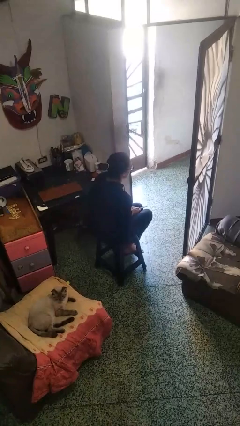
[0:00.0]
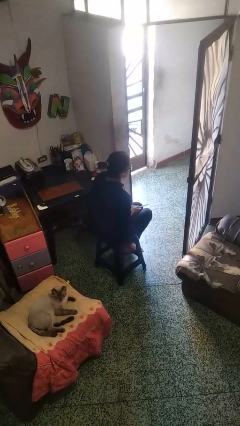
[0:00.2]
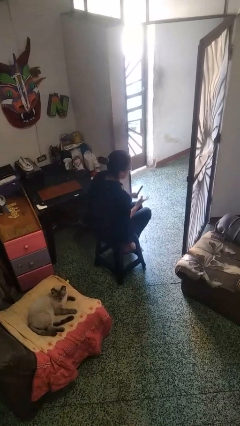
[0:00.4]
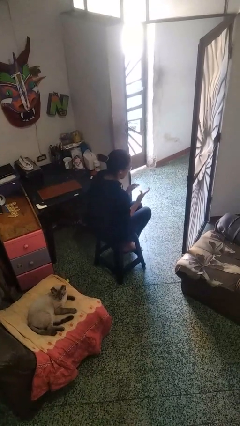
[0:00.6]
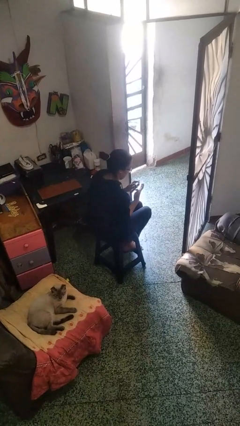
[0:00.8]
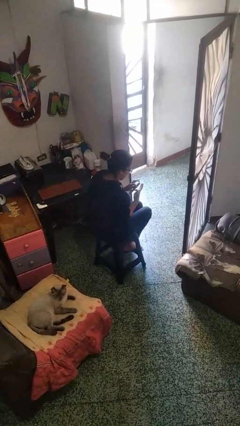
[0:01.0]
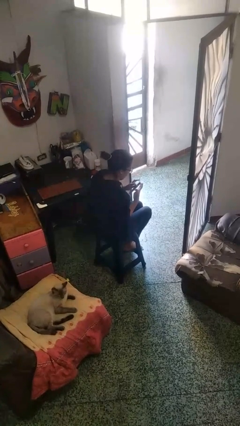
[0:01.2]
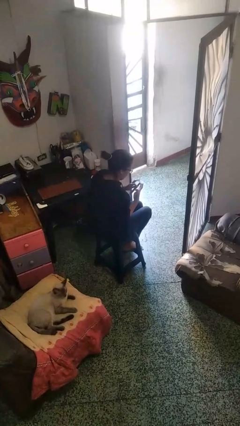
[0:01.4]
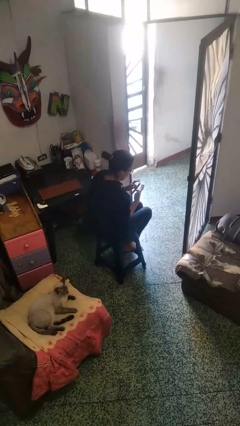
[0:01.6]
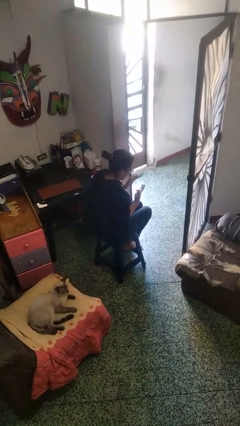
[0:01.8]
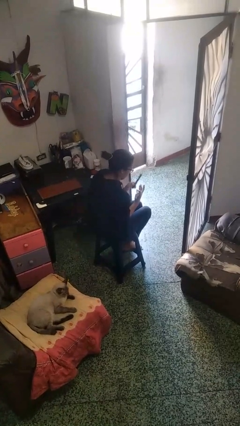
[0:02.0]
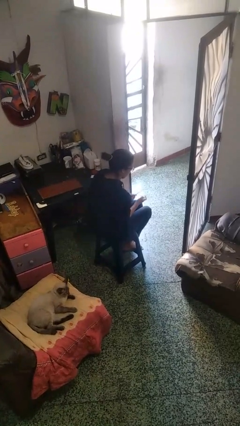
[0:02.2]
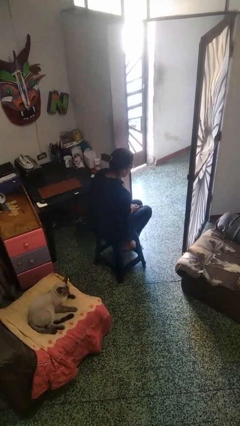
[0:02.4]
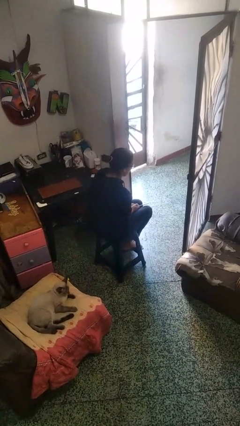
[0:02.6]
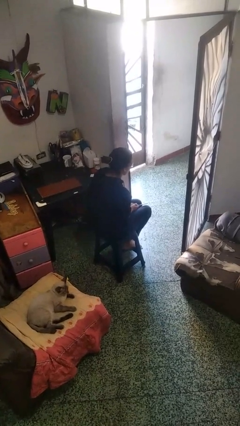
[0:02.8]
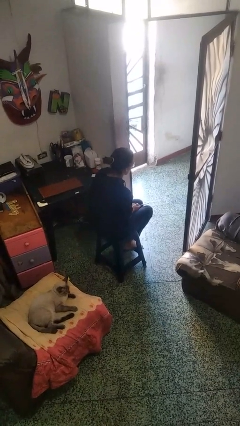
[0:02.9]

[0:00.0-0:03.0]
person files fingernails

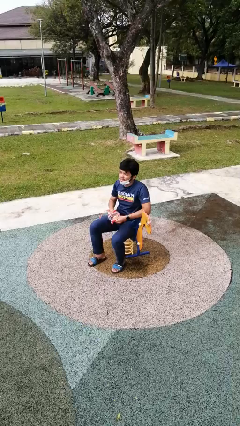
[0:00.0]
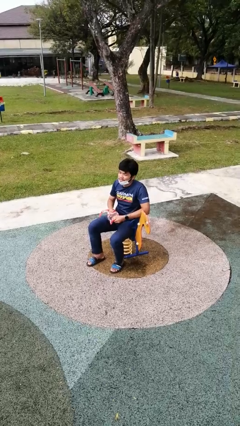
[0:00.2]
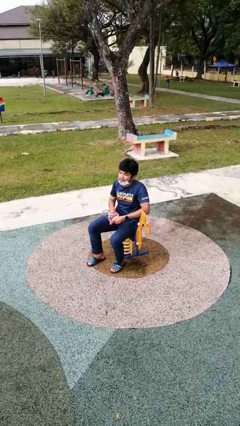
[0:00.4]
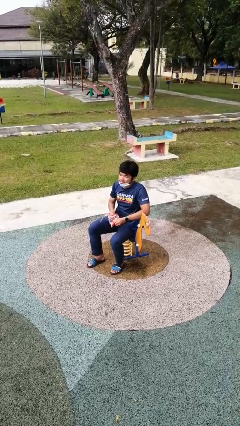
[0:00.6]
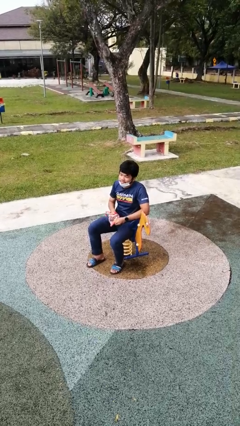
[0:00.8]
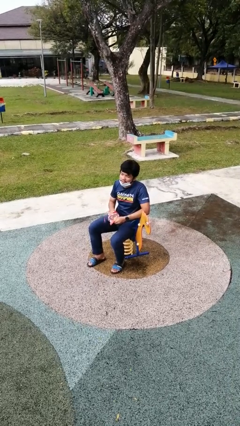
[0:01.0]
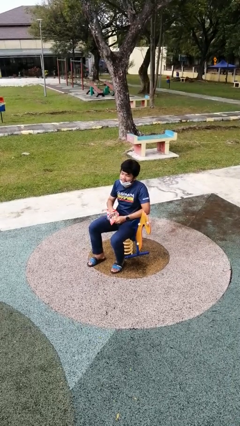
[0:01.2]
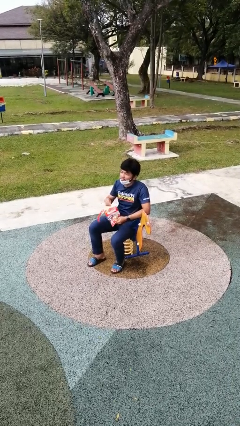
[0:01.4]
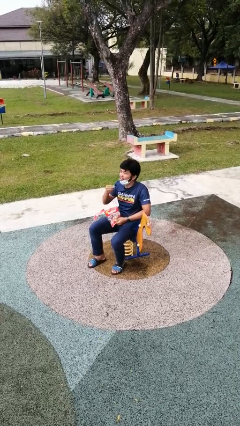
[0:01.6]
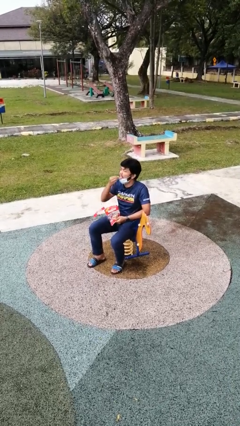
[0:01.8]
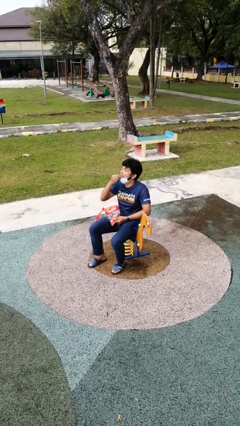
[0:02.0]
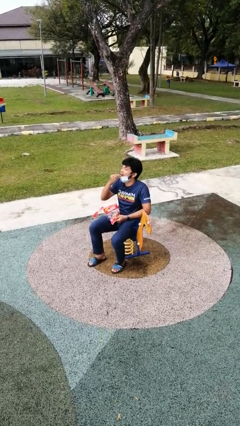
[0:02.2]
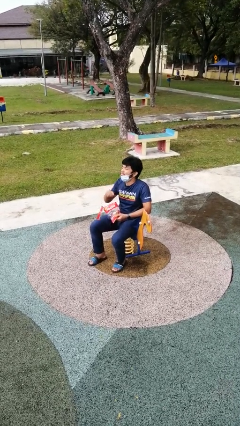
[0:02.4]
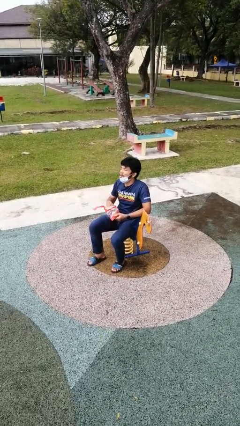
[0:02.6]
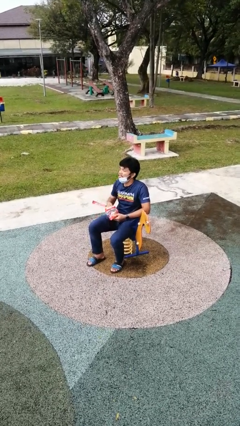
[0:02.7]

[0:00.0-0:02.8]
person eats snack from bag

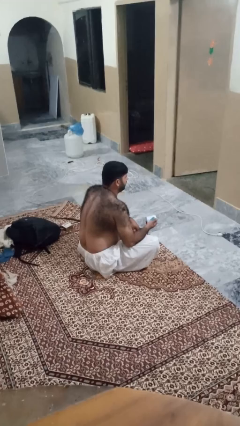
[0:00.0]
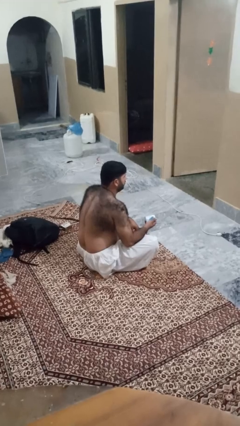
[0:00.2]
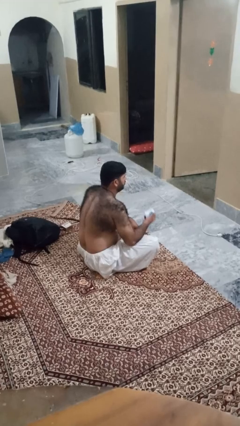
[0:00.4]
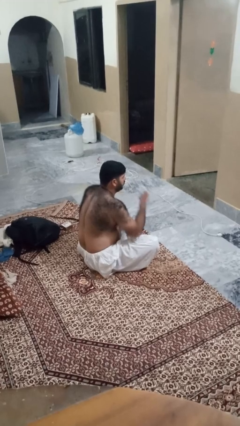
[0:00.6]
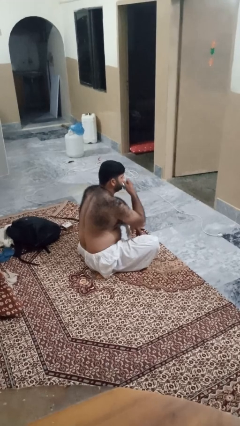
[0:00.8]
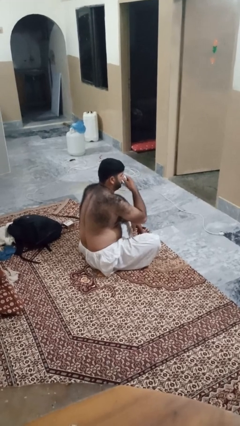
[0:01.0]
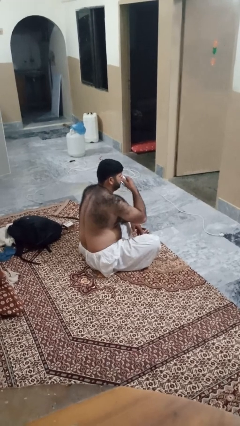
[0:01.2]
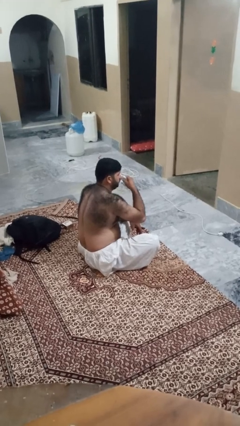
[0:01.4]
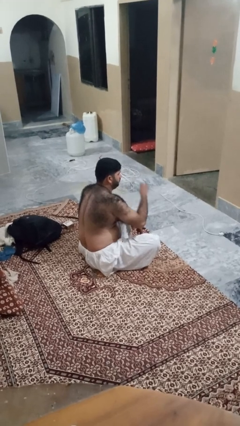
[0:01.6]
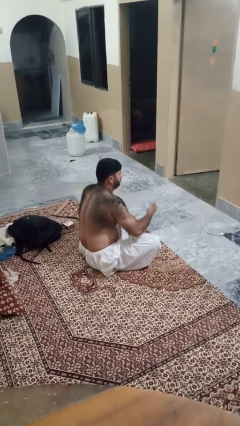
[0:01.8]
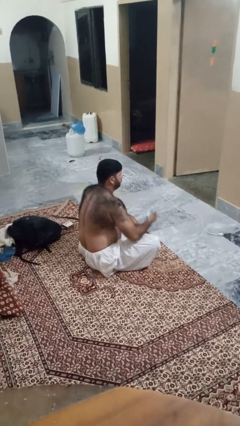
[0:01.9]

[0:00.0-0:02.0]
person blows nose

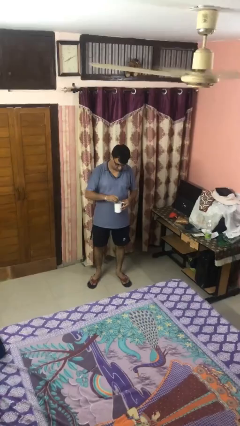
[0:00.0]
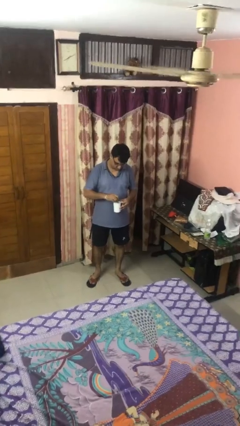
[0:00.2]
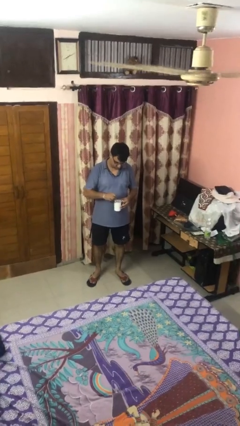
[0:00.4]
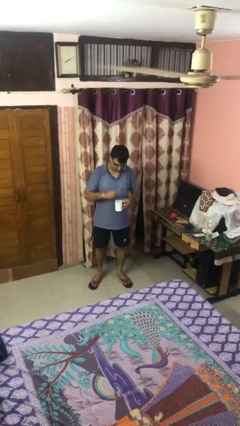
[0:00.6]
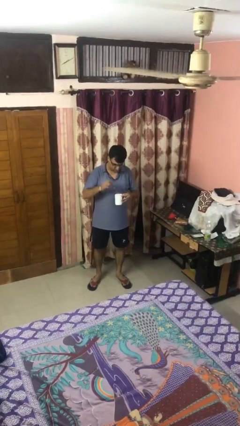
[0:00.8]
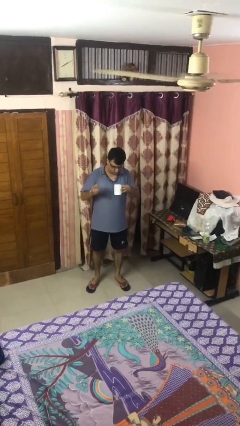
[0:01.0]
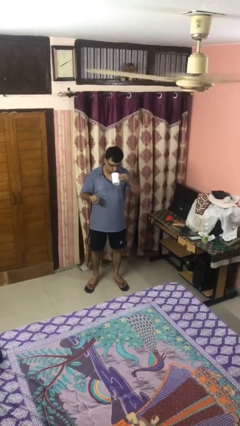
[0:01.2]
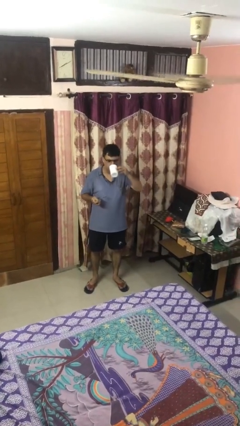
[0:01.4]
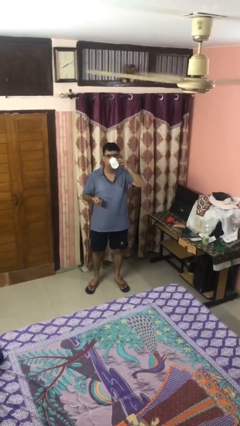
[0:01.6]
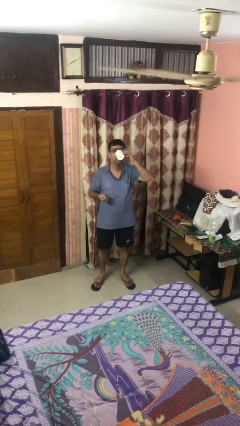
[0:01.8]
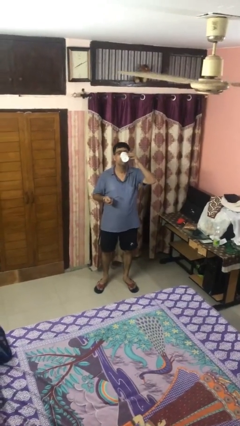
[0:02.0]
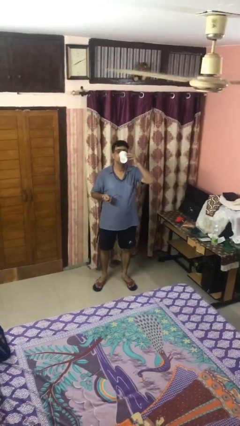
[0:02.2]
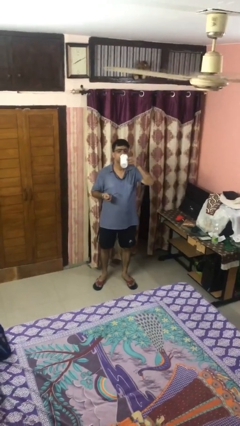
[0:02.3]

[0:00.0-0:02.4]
person drinks from mug

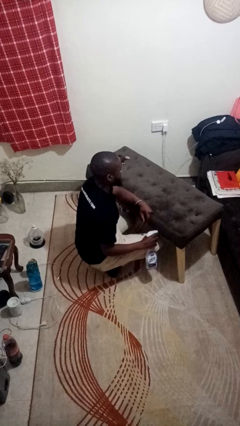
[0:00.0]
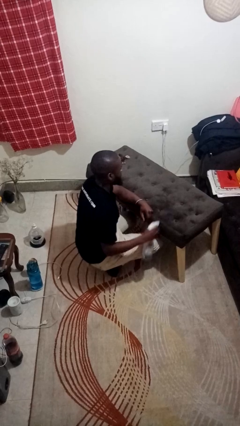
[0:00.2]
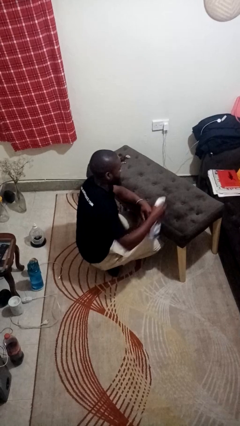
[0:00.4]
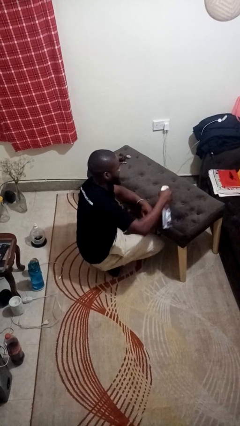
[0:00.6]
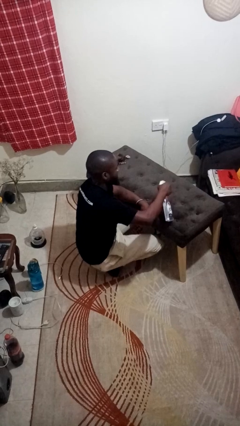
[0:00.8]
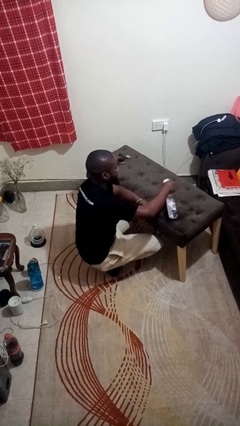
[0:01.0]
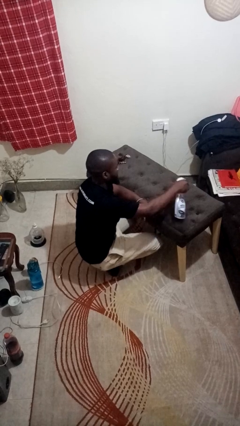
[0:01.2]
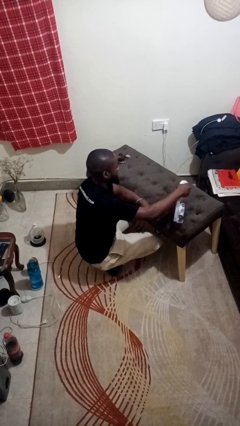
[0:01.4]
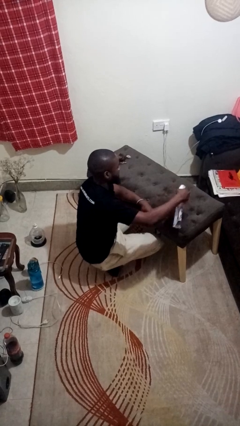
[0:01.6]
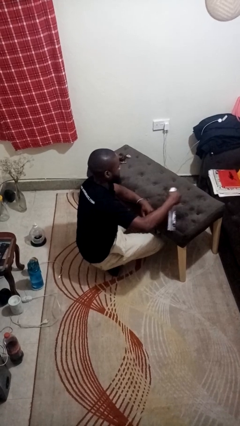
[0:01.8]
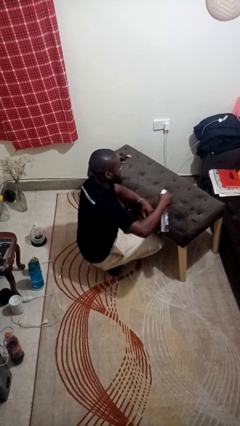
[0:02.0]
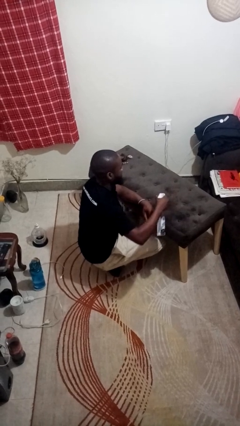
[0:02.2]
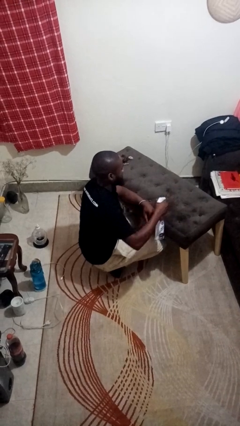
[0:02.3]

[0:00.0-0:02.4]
person sprays from bottle

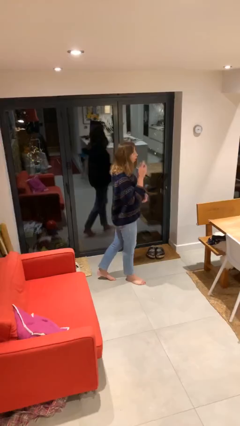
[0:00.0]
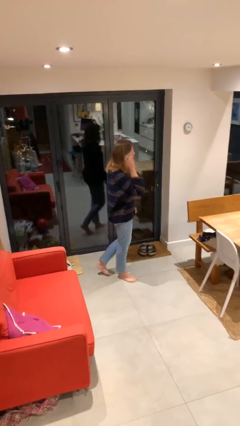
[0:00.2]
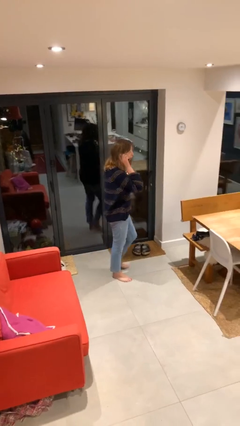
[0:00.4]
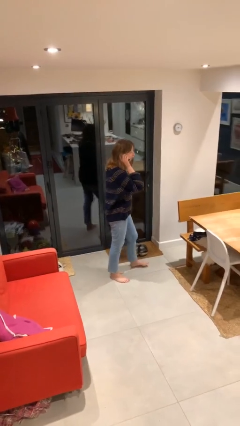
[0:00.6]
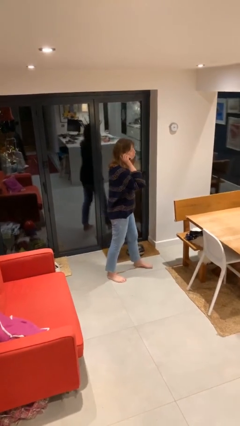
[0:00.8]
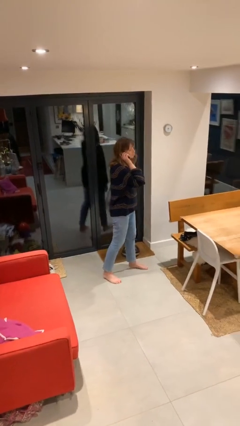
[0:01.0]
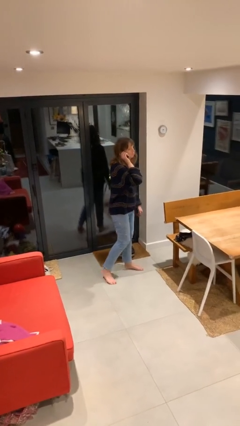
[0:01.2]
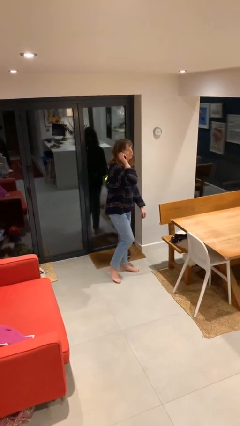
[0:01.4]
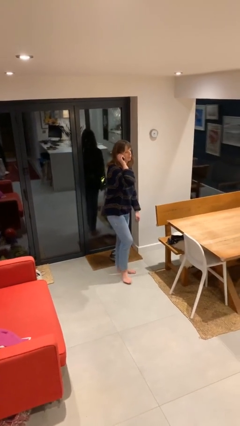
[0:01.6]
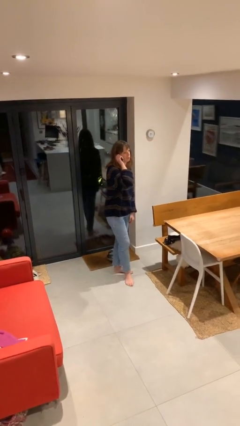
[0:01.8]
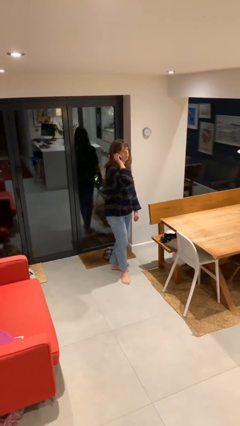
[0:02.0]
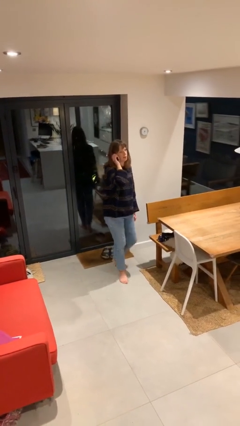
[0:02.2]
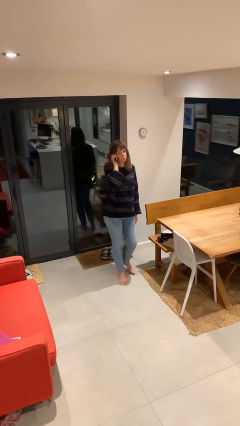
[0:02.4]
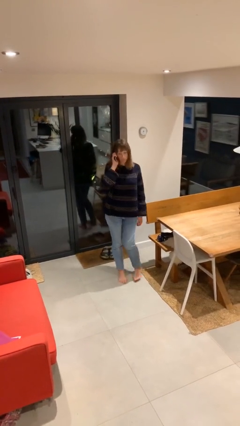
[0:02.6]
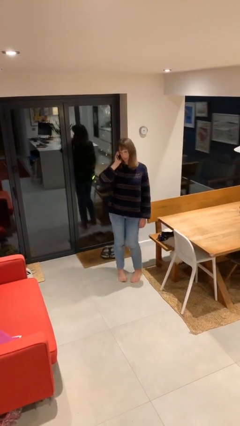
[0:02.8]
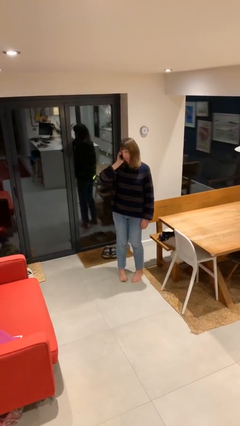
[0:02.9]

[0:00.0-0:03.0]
person talks on phone

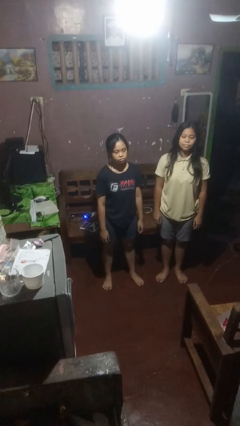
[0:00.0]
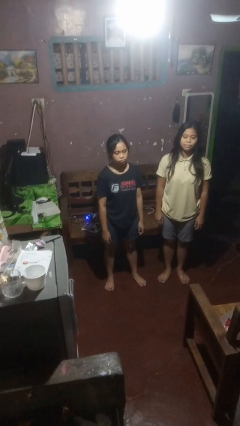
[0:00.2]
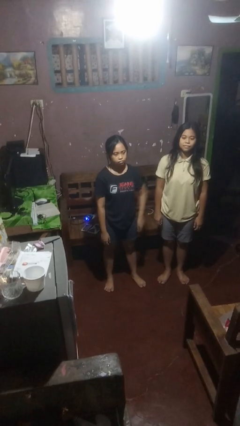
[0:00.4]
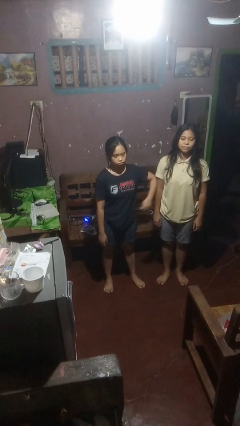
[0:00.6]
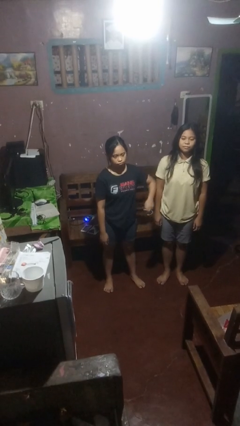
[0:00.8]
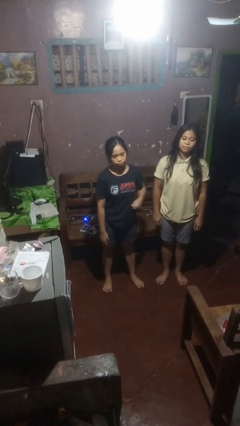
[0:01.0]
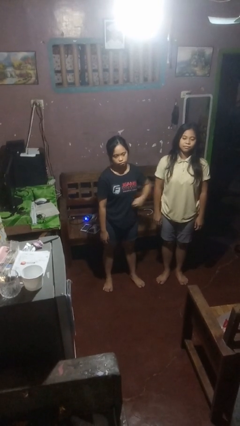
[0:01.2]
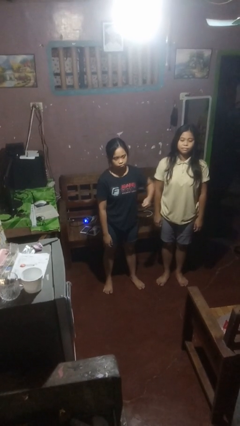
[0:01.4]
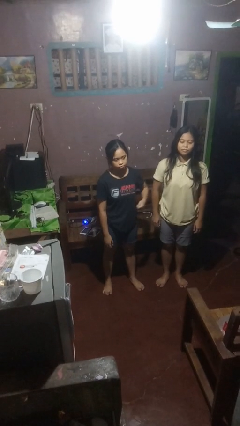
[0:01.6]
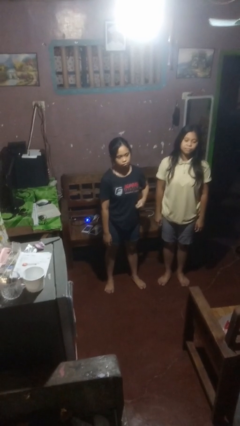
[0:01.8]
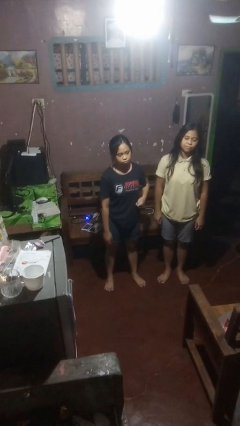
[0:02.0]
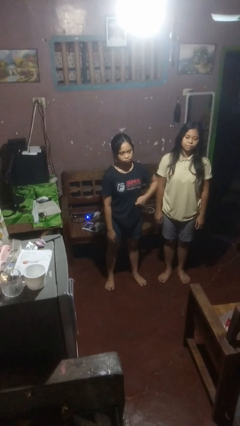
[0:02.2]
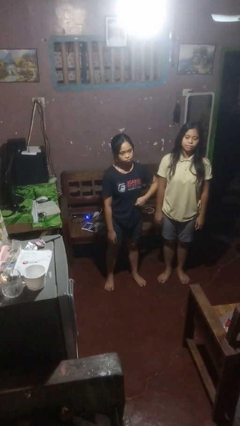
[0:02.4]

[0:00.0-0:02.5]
person nudges person with elbow
